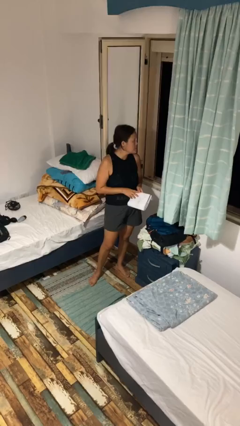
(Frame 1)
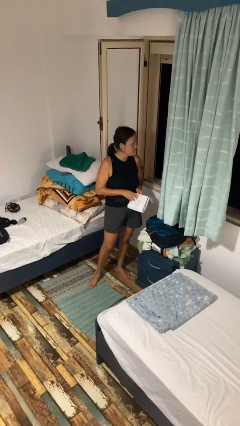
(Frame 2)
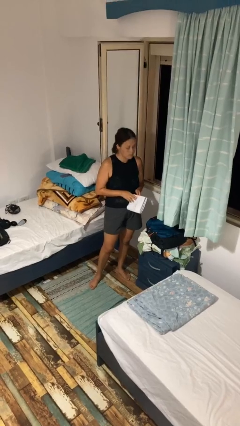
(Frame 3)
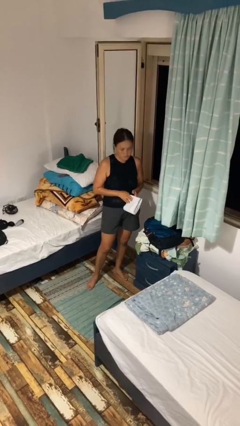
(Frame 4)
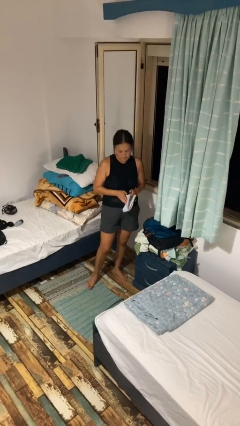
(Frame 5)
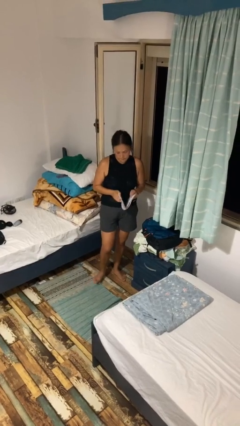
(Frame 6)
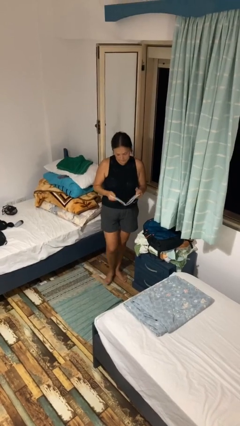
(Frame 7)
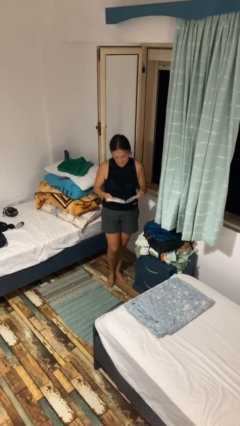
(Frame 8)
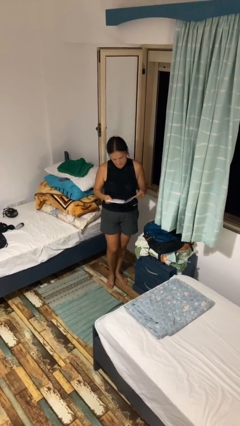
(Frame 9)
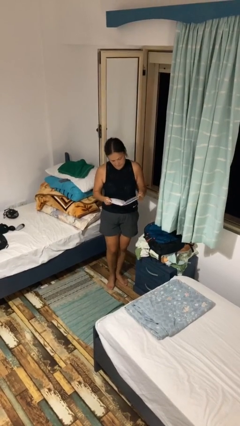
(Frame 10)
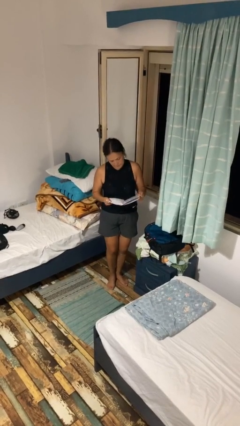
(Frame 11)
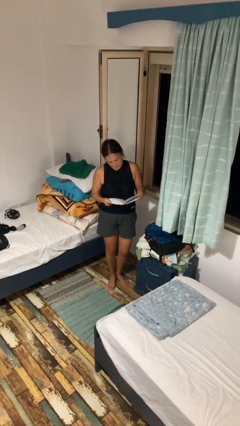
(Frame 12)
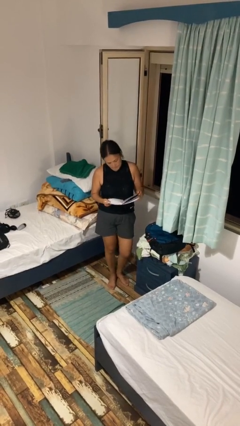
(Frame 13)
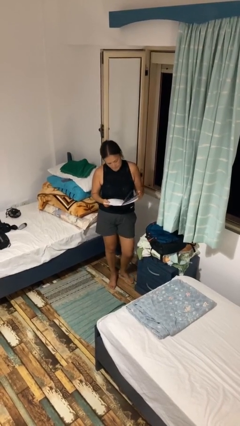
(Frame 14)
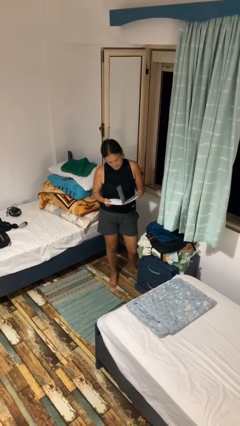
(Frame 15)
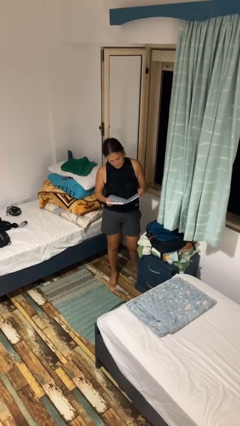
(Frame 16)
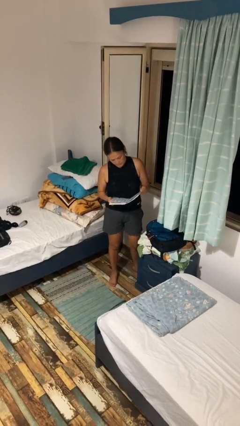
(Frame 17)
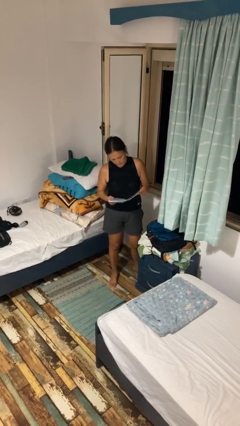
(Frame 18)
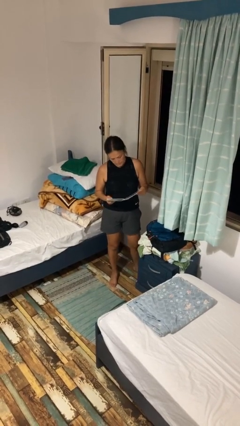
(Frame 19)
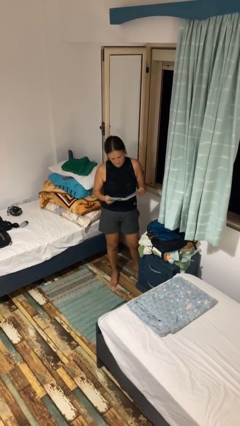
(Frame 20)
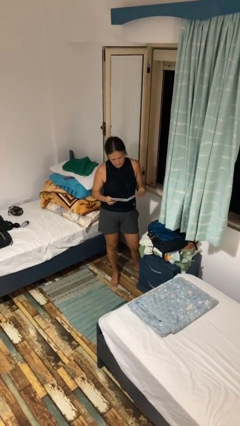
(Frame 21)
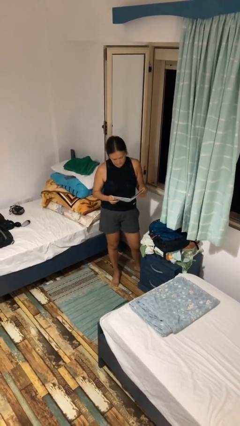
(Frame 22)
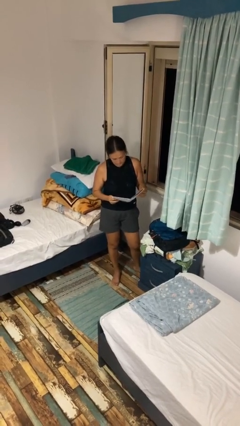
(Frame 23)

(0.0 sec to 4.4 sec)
person reads book

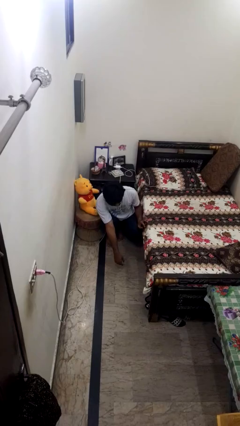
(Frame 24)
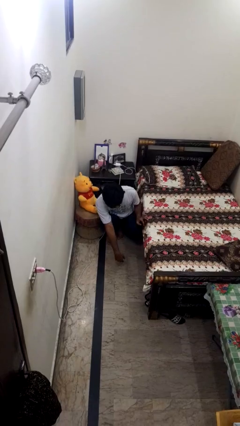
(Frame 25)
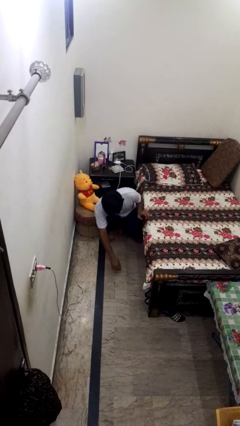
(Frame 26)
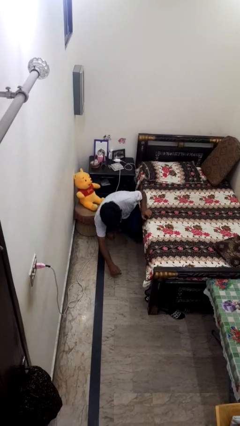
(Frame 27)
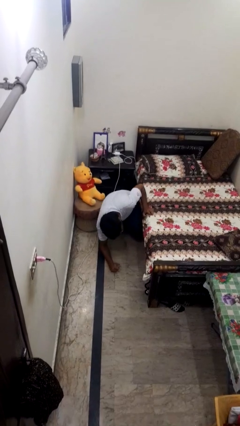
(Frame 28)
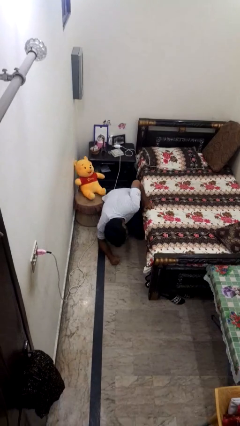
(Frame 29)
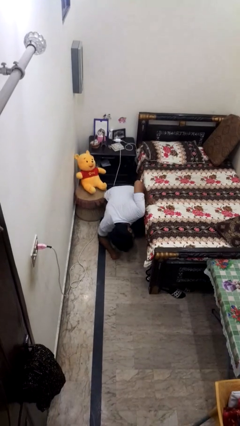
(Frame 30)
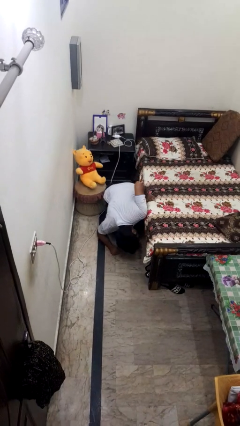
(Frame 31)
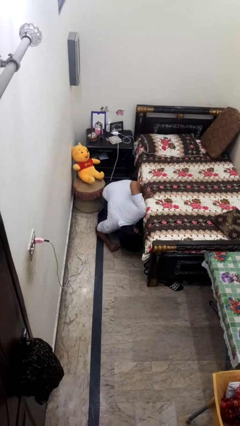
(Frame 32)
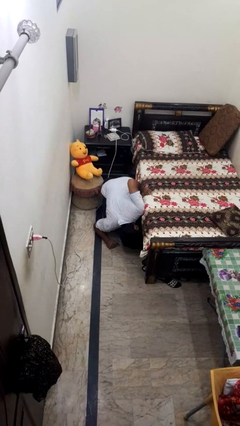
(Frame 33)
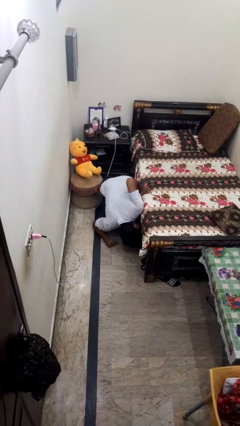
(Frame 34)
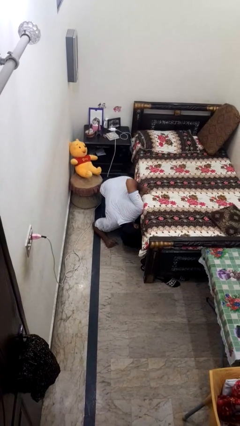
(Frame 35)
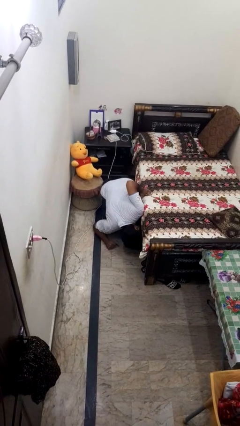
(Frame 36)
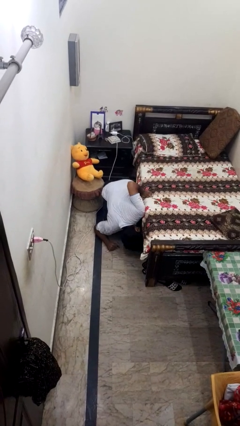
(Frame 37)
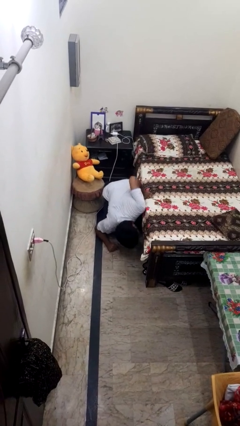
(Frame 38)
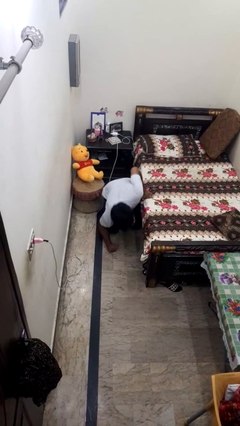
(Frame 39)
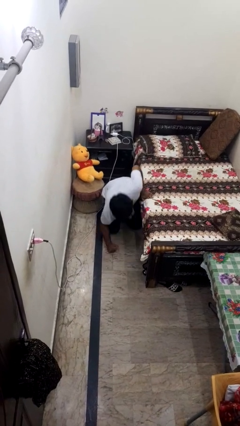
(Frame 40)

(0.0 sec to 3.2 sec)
person searches under bed

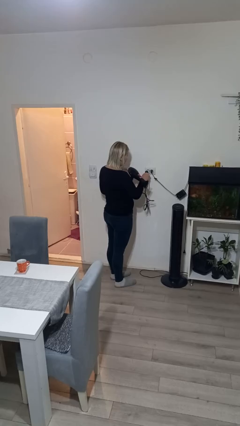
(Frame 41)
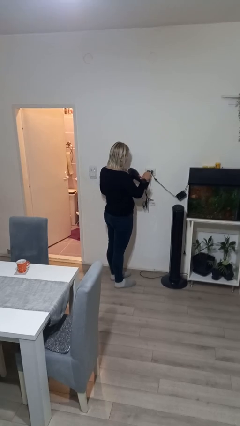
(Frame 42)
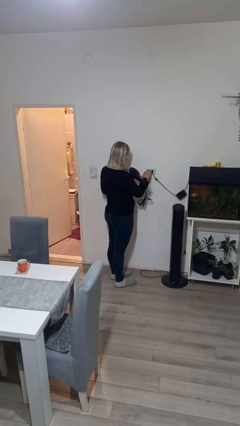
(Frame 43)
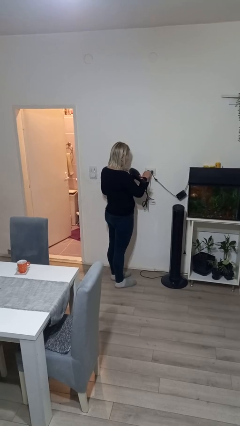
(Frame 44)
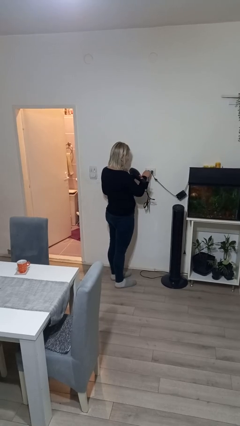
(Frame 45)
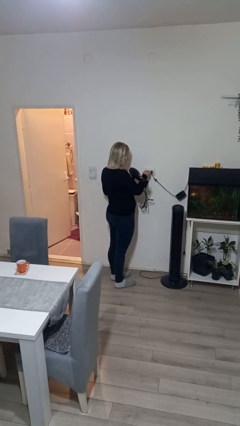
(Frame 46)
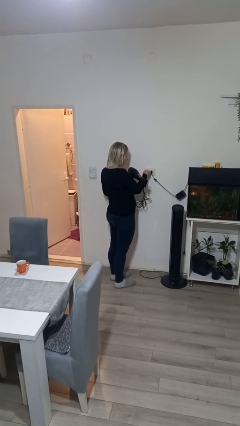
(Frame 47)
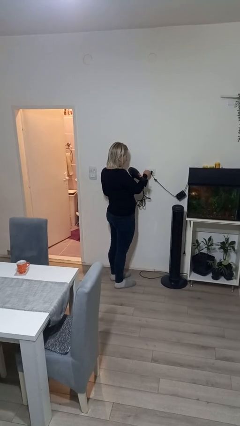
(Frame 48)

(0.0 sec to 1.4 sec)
person plugs into electrical socket

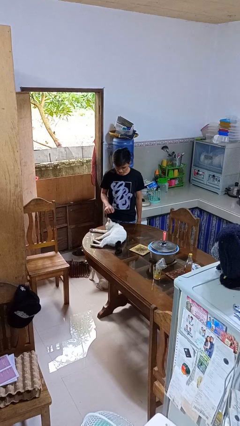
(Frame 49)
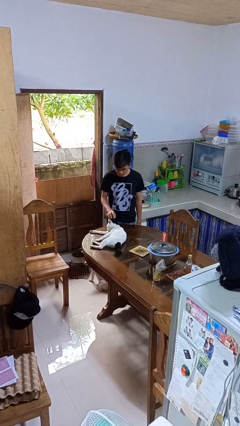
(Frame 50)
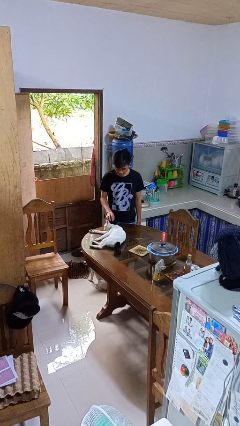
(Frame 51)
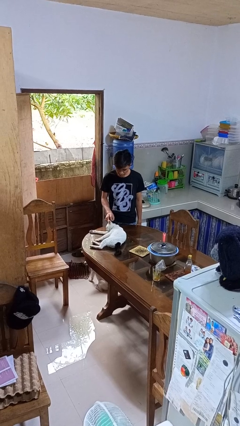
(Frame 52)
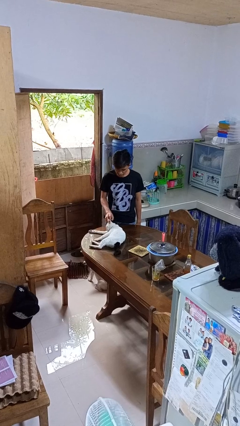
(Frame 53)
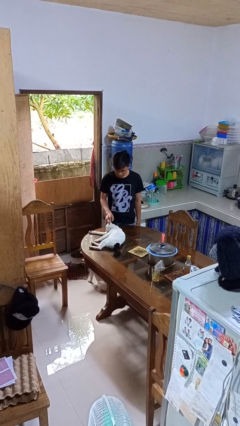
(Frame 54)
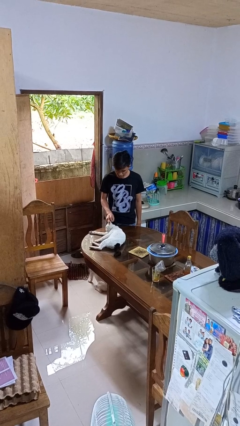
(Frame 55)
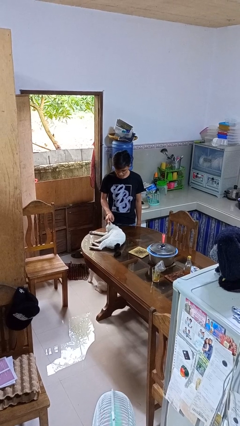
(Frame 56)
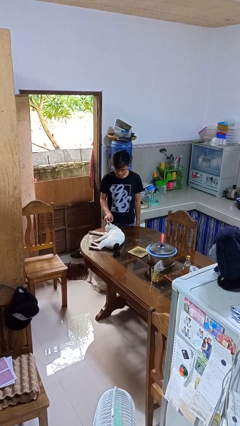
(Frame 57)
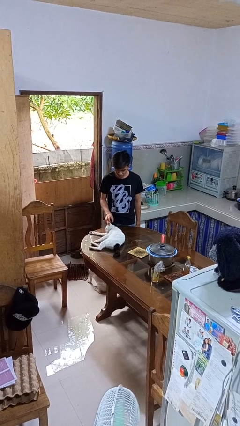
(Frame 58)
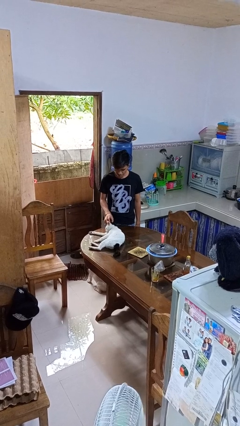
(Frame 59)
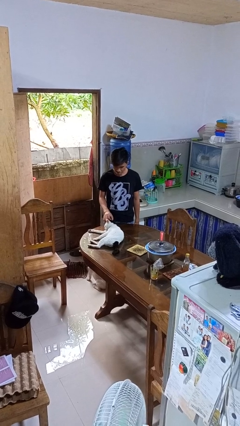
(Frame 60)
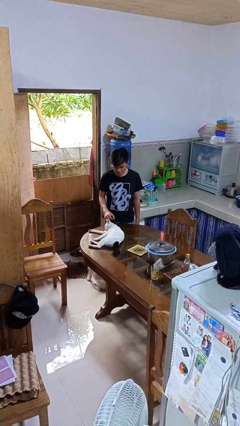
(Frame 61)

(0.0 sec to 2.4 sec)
person pets cat

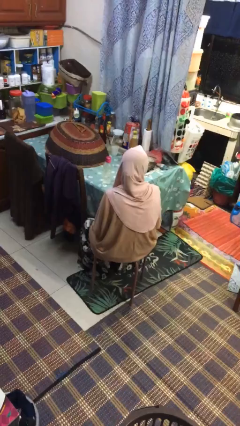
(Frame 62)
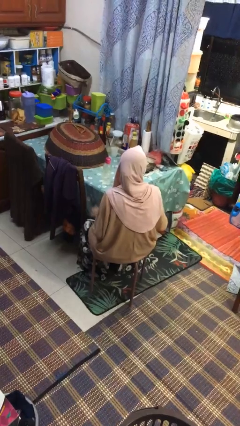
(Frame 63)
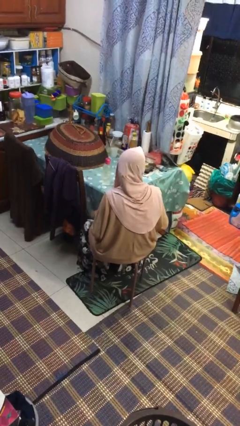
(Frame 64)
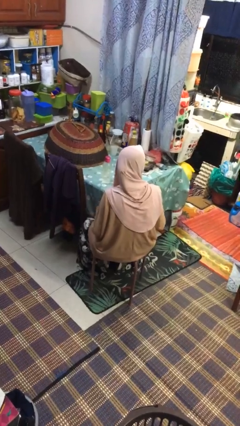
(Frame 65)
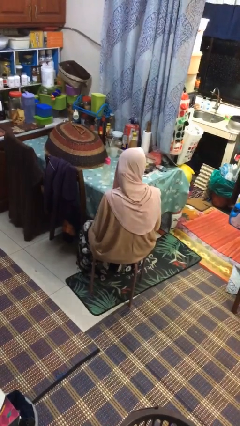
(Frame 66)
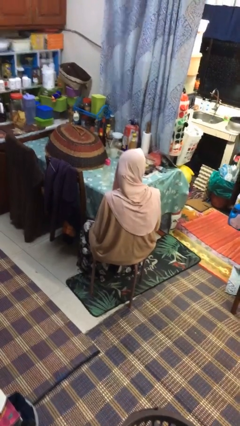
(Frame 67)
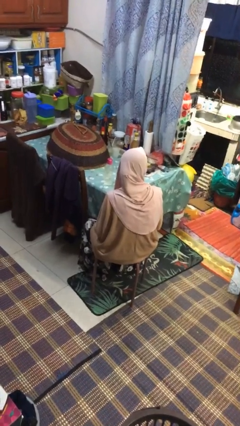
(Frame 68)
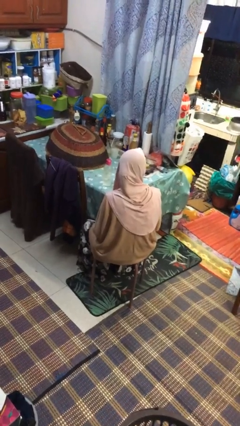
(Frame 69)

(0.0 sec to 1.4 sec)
person slaps hands on thighs

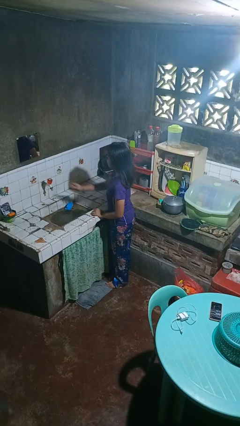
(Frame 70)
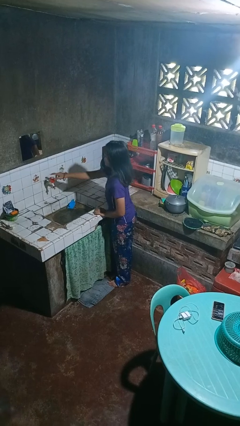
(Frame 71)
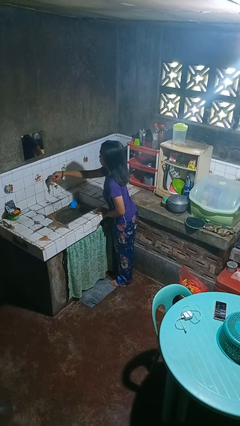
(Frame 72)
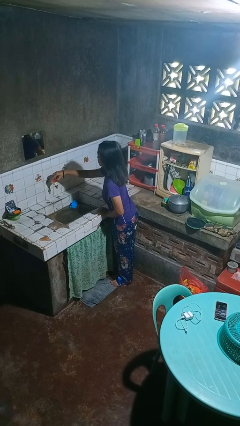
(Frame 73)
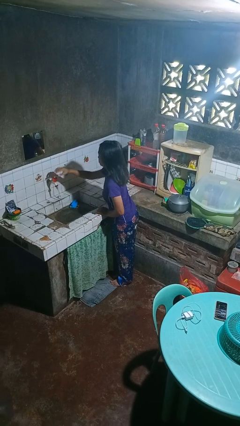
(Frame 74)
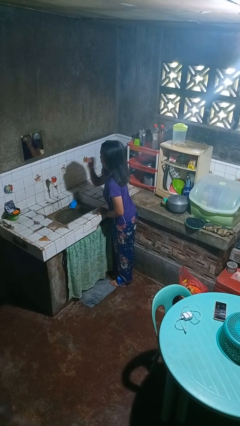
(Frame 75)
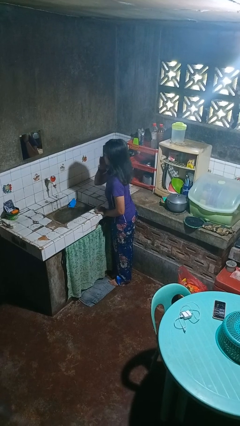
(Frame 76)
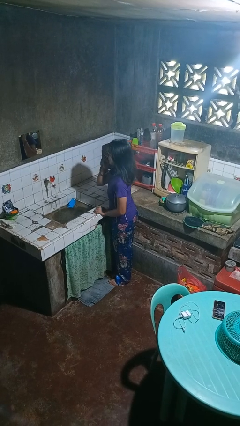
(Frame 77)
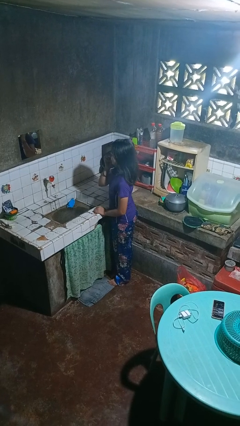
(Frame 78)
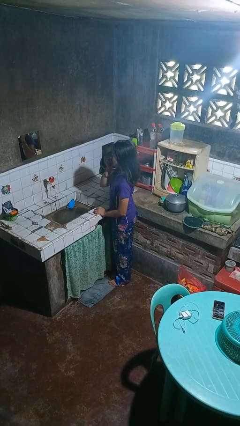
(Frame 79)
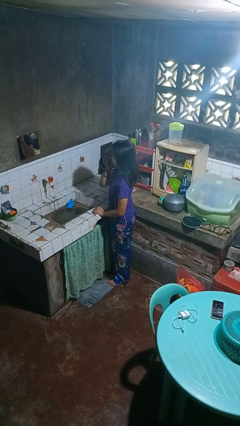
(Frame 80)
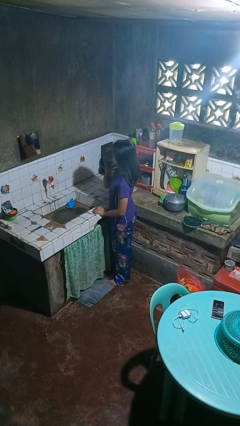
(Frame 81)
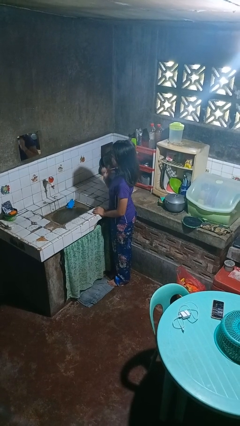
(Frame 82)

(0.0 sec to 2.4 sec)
person turns on faucet

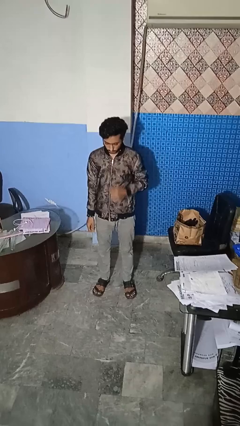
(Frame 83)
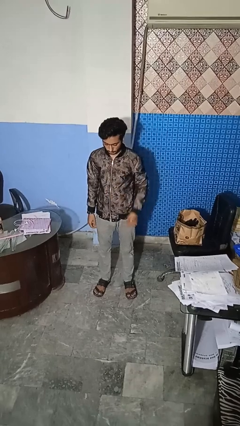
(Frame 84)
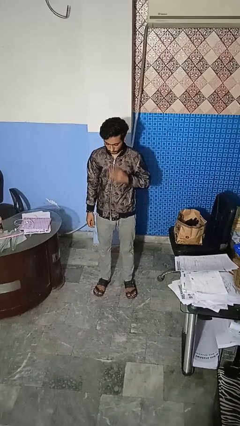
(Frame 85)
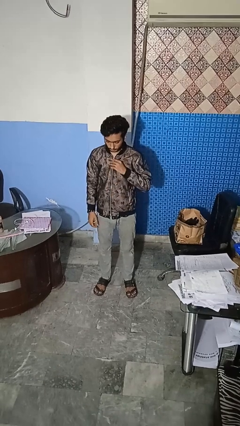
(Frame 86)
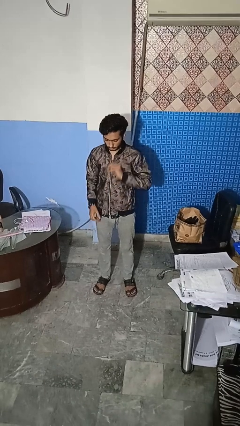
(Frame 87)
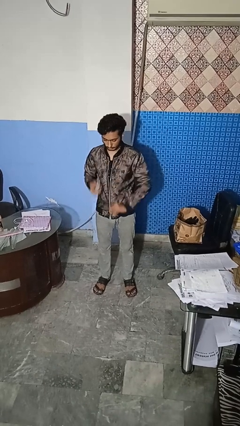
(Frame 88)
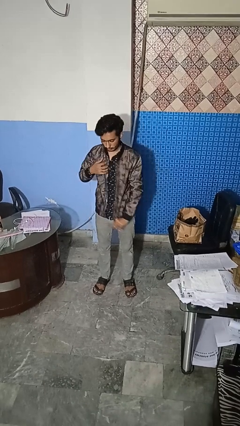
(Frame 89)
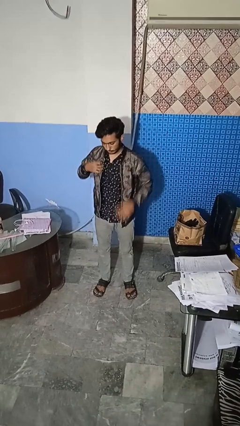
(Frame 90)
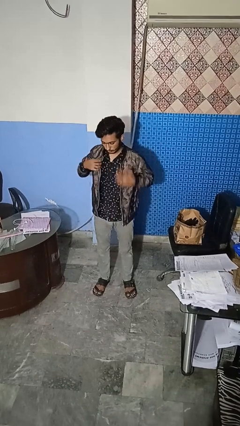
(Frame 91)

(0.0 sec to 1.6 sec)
person unzips jacket

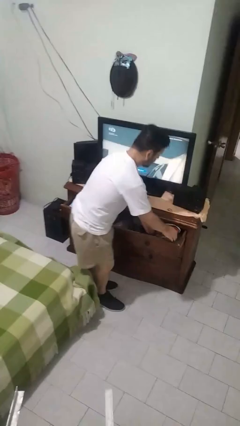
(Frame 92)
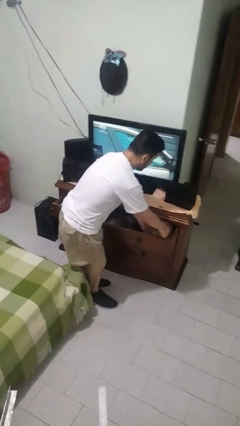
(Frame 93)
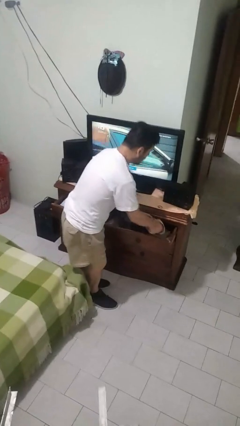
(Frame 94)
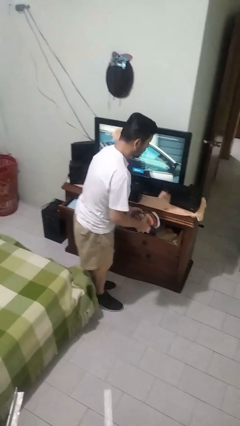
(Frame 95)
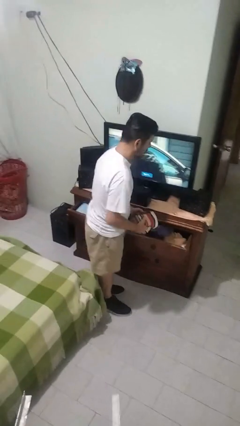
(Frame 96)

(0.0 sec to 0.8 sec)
person takes clothes from dresser
